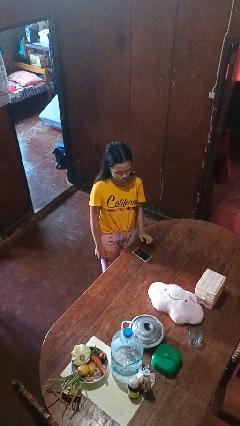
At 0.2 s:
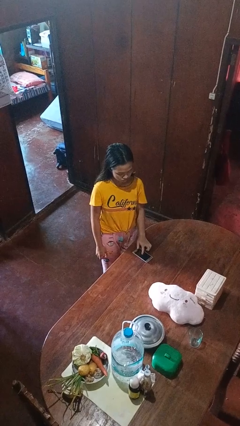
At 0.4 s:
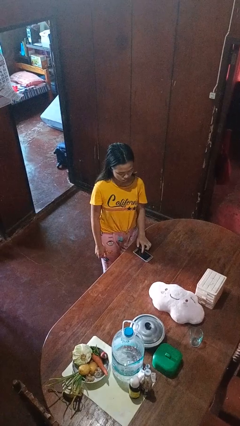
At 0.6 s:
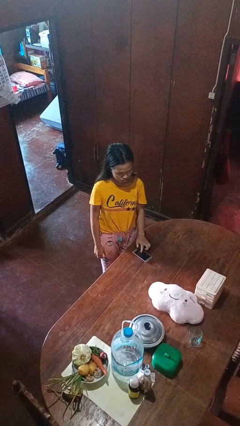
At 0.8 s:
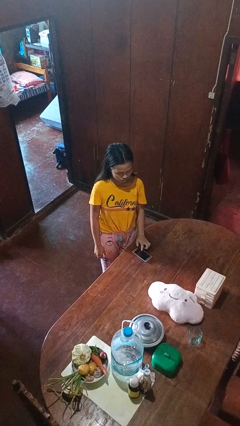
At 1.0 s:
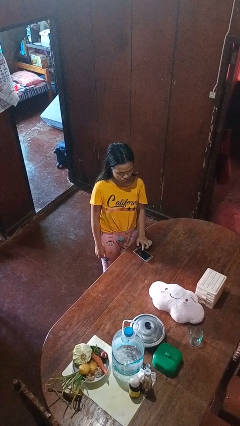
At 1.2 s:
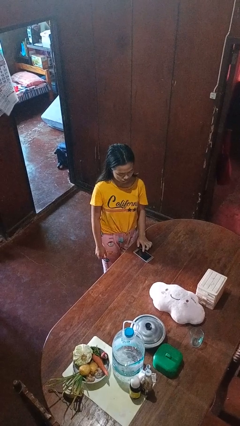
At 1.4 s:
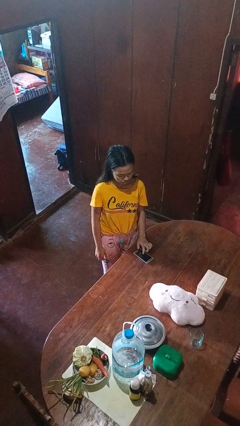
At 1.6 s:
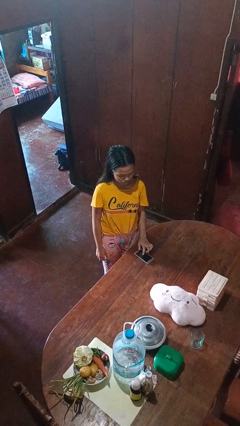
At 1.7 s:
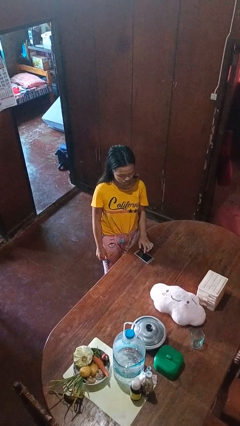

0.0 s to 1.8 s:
person taps object with finger

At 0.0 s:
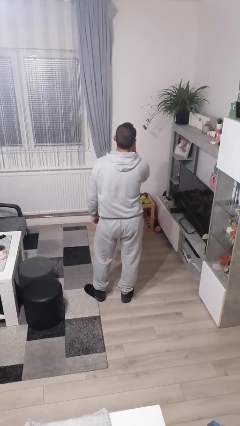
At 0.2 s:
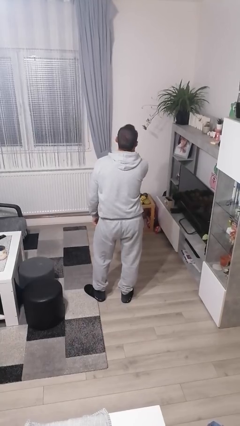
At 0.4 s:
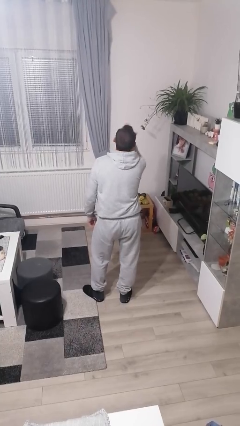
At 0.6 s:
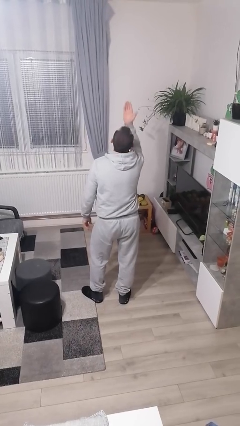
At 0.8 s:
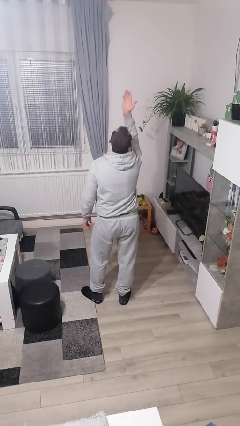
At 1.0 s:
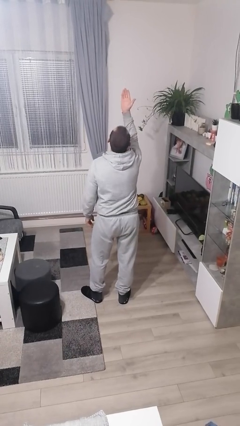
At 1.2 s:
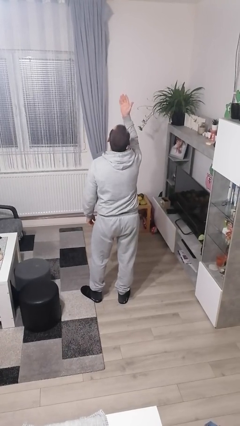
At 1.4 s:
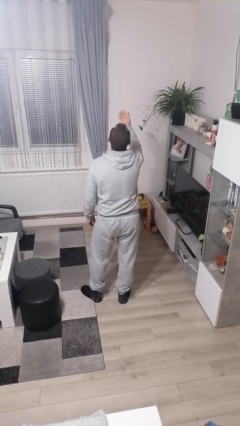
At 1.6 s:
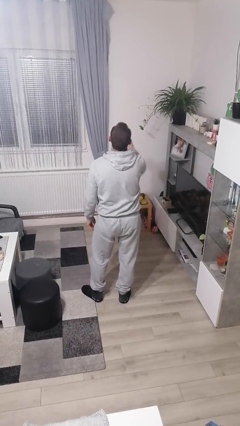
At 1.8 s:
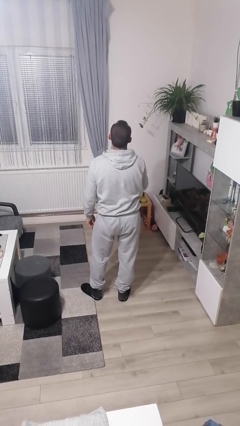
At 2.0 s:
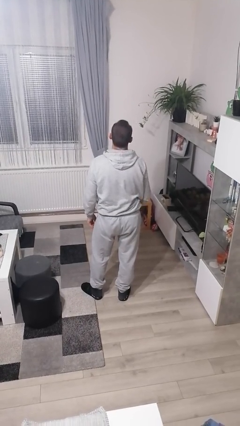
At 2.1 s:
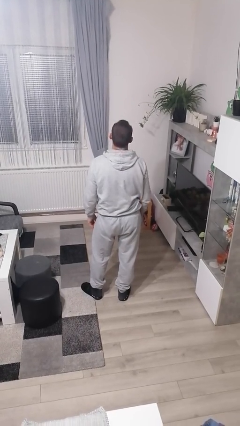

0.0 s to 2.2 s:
person gestures blow kiss

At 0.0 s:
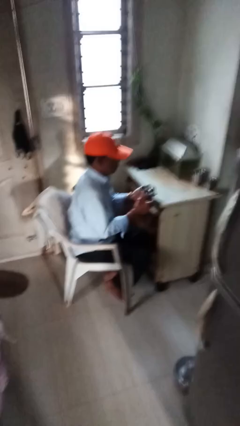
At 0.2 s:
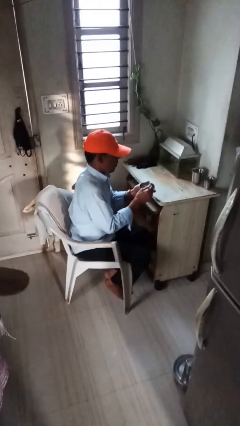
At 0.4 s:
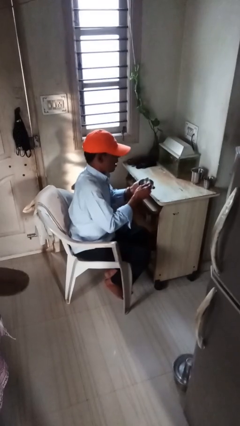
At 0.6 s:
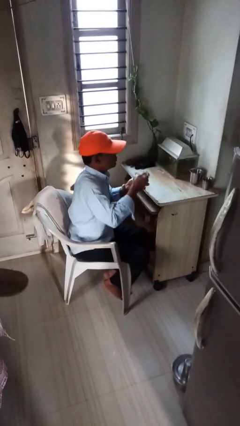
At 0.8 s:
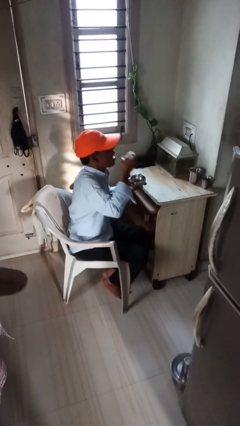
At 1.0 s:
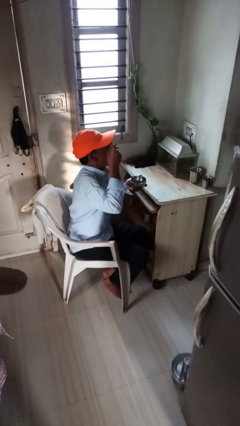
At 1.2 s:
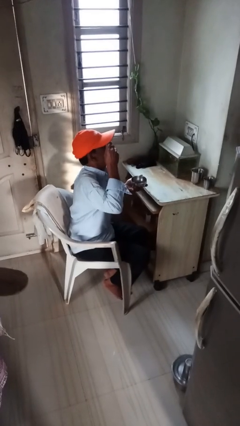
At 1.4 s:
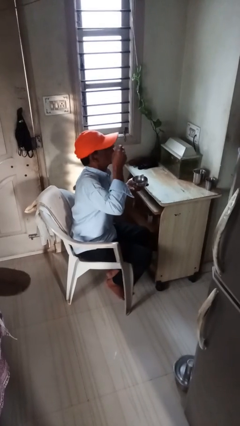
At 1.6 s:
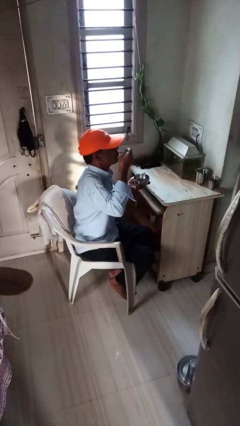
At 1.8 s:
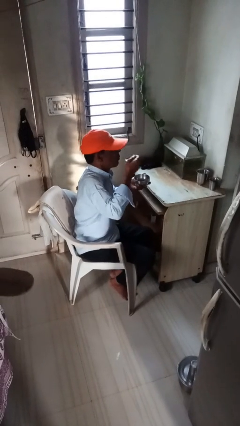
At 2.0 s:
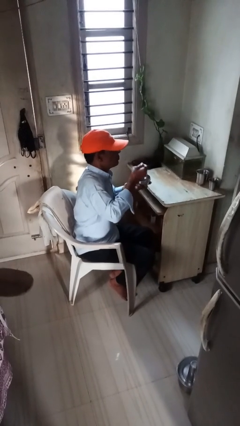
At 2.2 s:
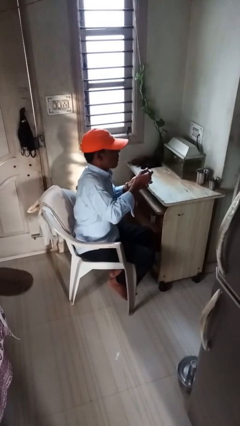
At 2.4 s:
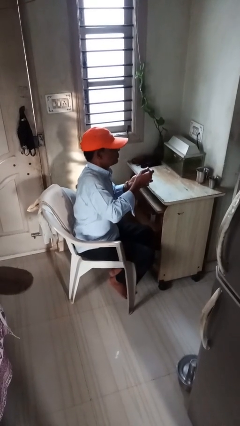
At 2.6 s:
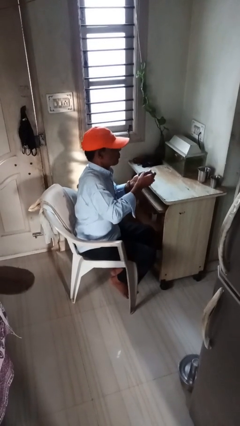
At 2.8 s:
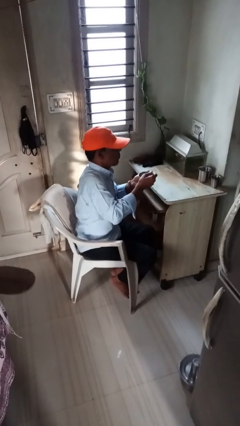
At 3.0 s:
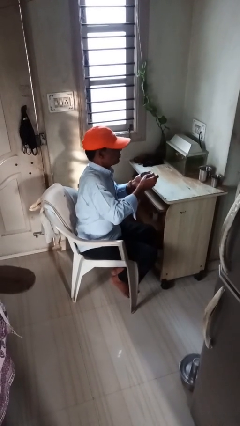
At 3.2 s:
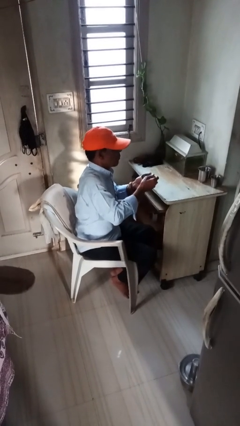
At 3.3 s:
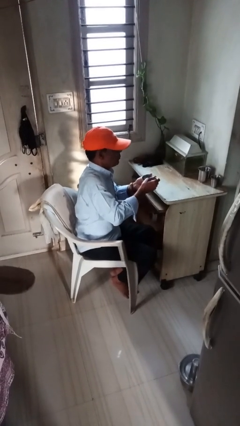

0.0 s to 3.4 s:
person eats with utensil

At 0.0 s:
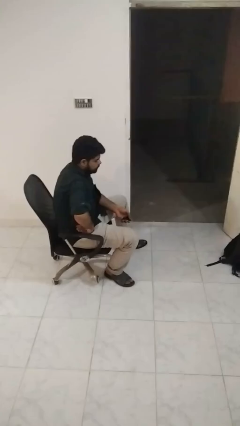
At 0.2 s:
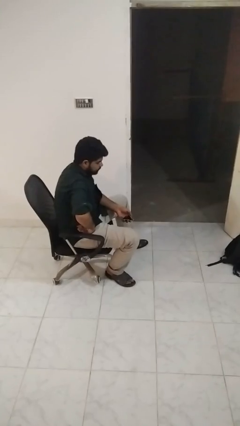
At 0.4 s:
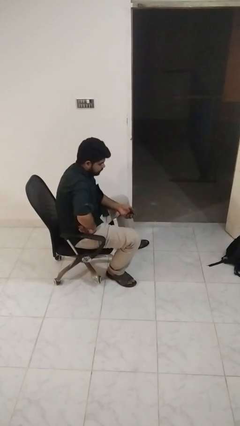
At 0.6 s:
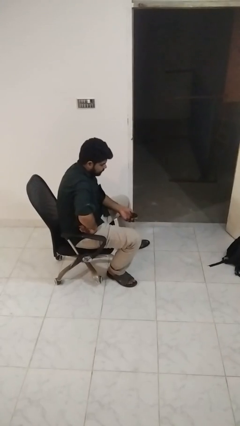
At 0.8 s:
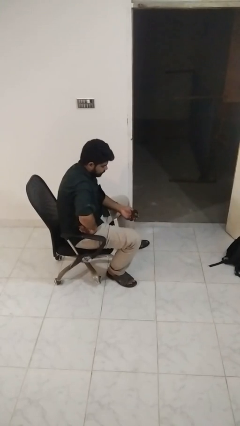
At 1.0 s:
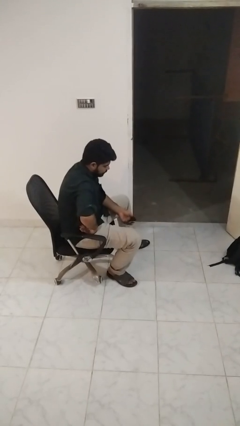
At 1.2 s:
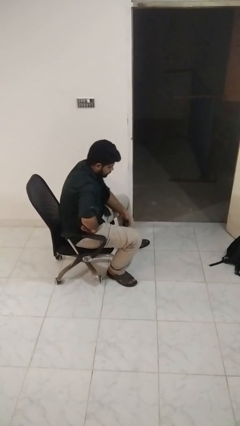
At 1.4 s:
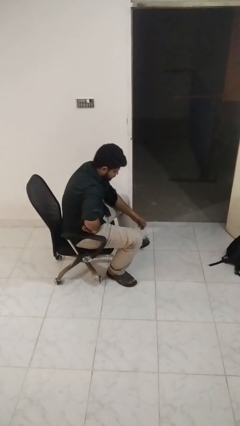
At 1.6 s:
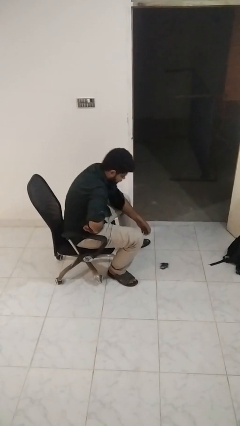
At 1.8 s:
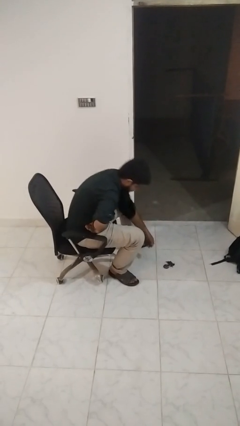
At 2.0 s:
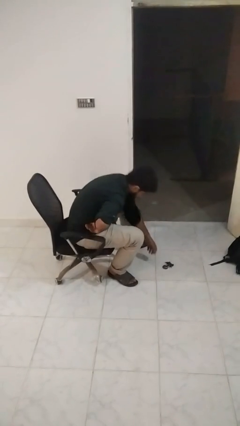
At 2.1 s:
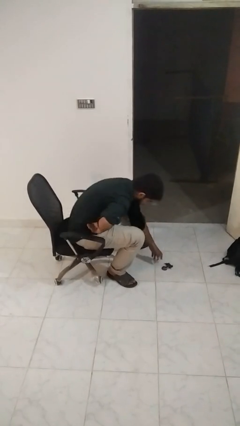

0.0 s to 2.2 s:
person drops object

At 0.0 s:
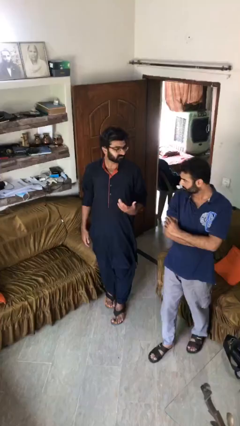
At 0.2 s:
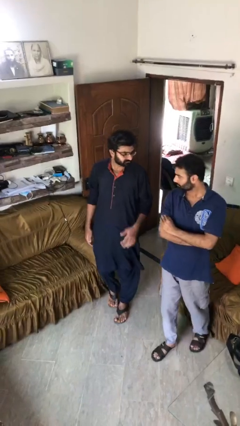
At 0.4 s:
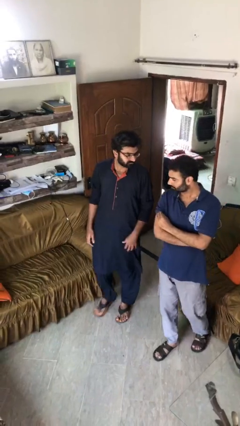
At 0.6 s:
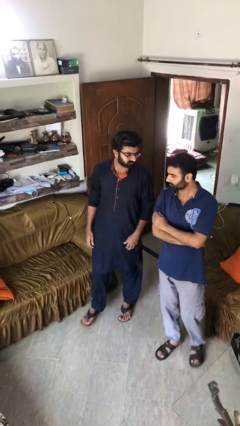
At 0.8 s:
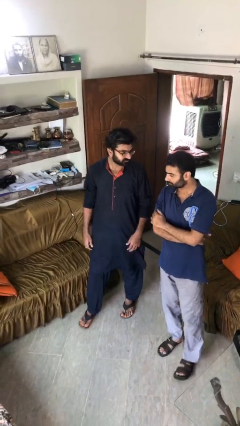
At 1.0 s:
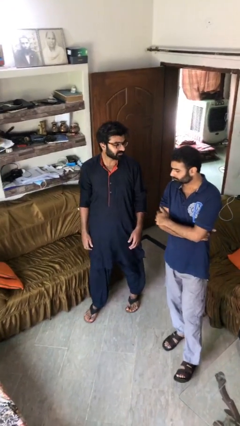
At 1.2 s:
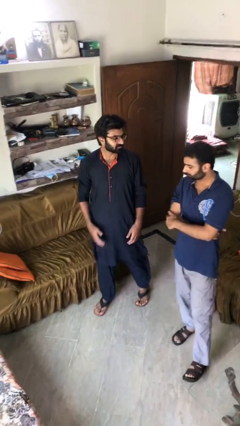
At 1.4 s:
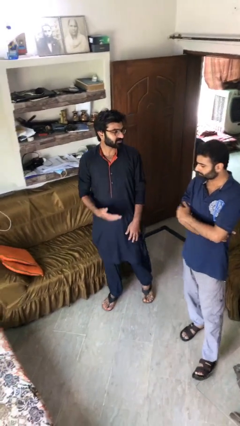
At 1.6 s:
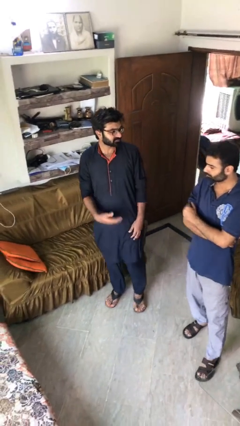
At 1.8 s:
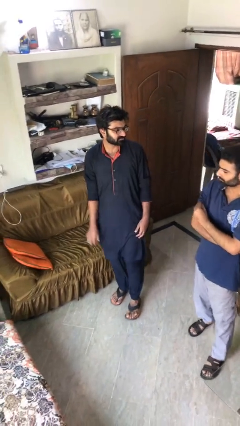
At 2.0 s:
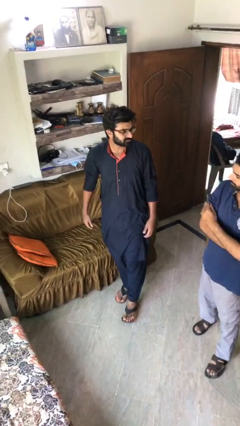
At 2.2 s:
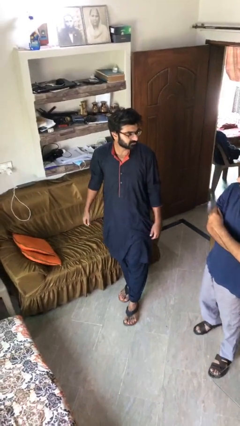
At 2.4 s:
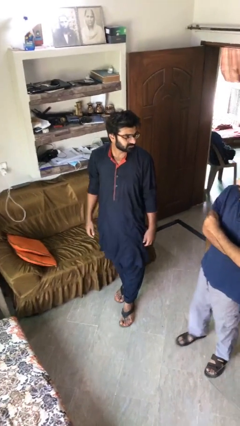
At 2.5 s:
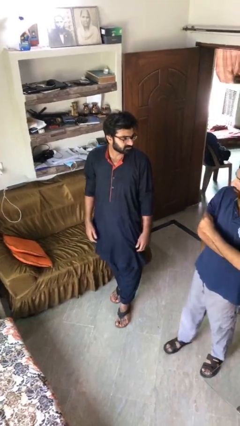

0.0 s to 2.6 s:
person talks to person

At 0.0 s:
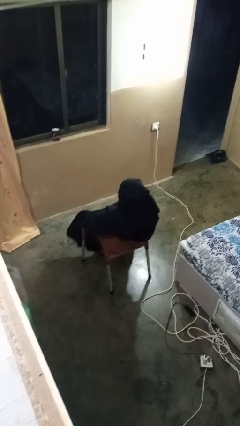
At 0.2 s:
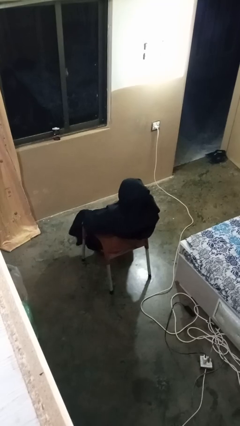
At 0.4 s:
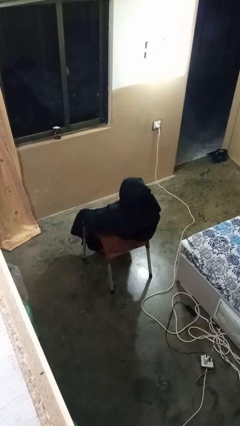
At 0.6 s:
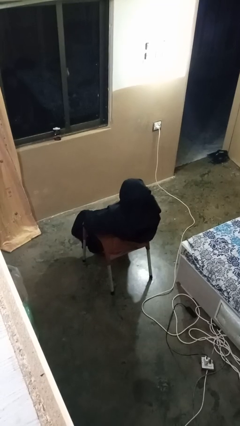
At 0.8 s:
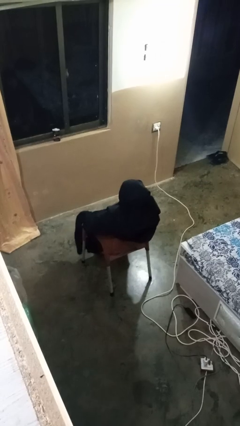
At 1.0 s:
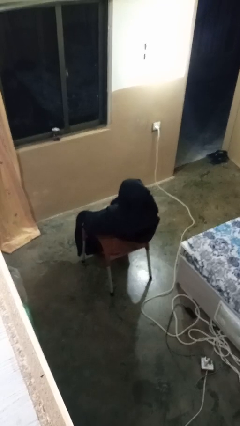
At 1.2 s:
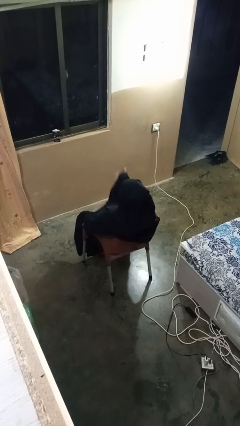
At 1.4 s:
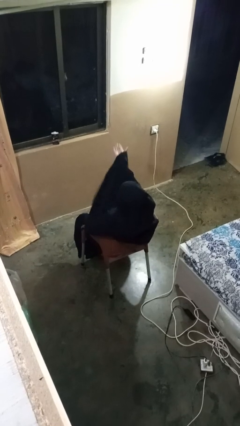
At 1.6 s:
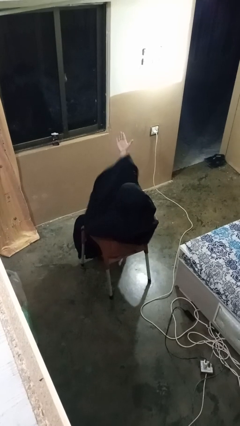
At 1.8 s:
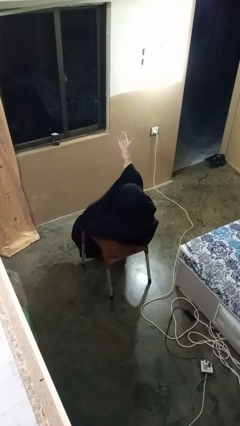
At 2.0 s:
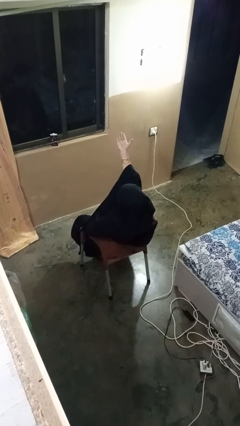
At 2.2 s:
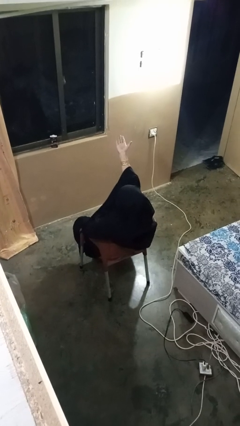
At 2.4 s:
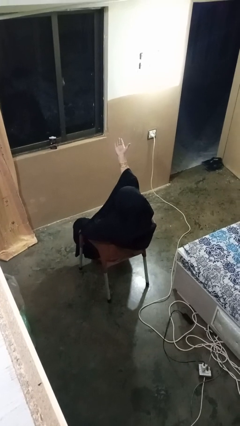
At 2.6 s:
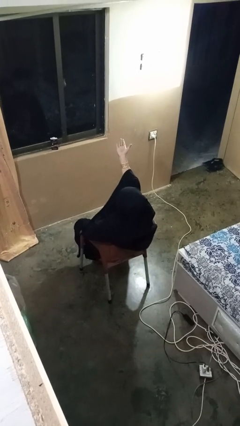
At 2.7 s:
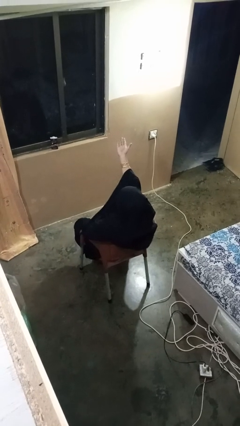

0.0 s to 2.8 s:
person gestures swipe up

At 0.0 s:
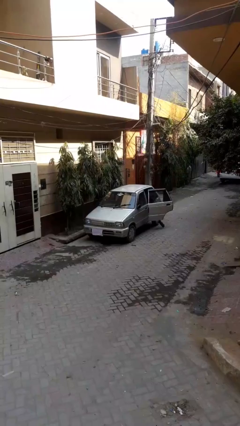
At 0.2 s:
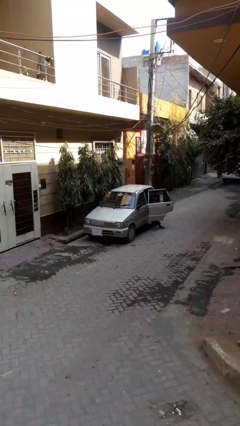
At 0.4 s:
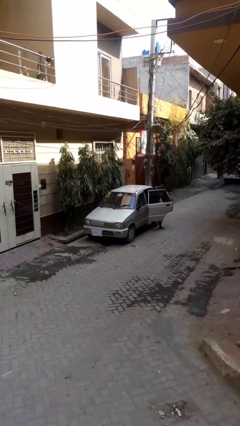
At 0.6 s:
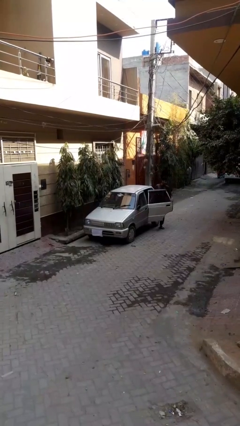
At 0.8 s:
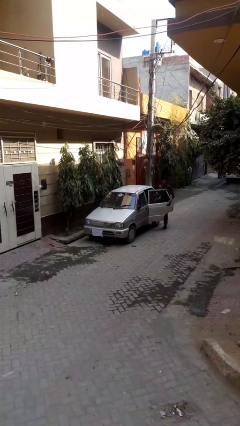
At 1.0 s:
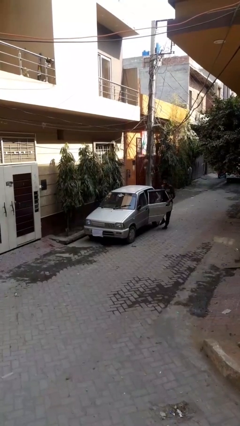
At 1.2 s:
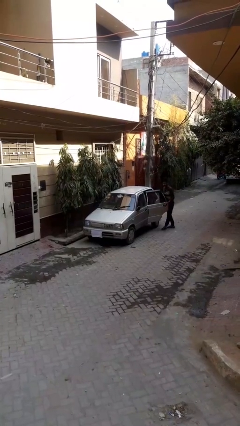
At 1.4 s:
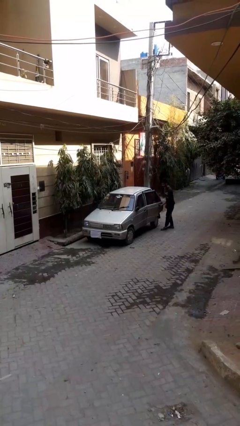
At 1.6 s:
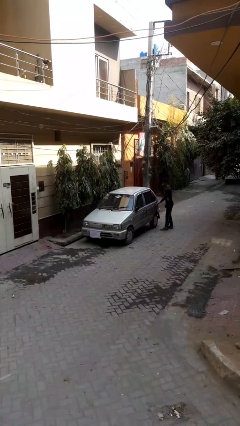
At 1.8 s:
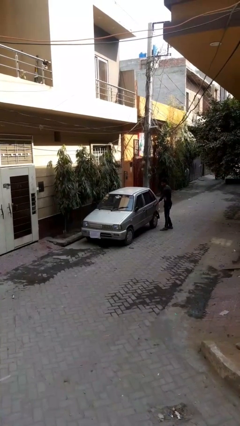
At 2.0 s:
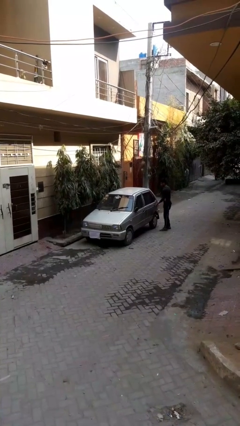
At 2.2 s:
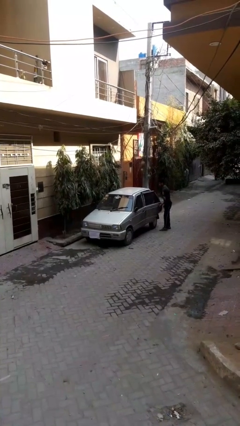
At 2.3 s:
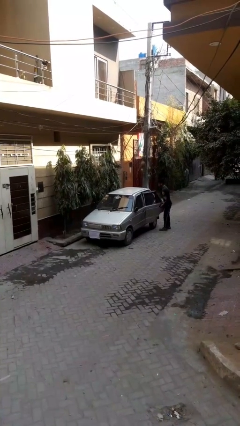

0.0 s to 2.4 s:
car drops off person
